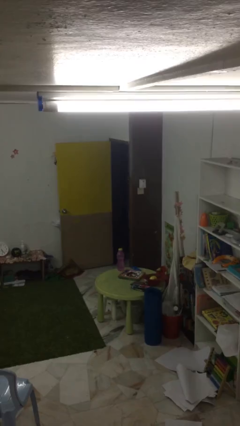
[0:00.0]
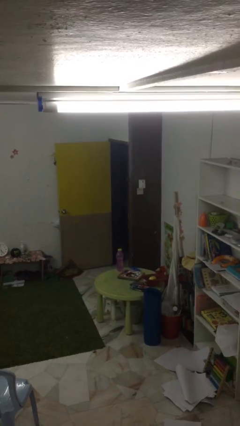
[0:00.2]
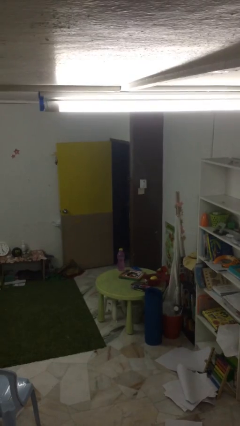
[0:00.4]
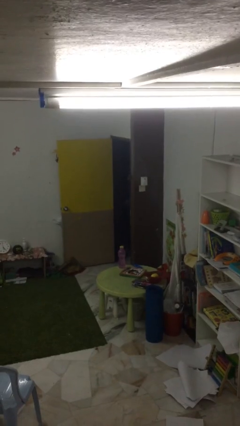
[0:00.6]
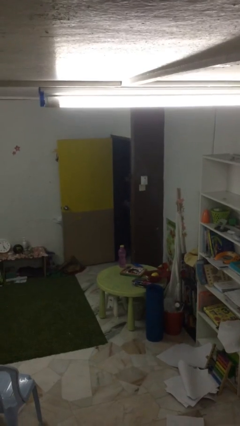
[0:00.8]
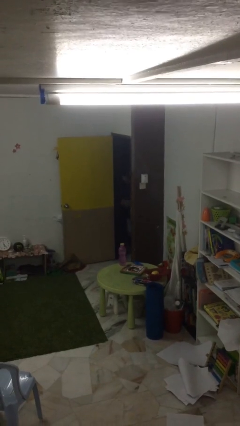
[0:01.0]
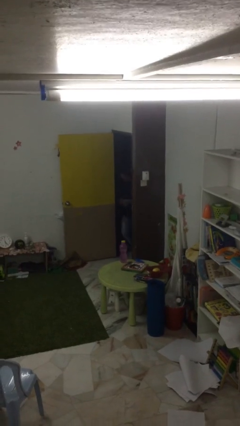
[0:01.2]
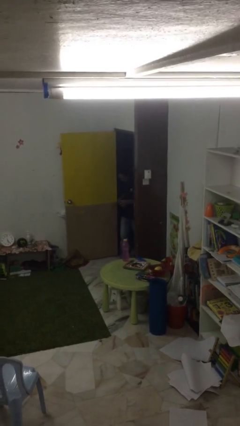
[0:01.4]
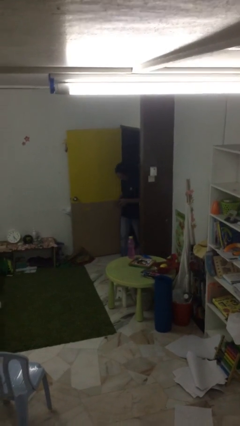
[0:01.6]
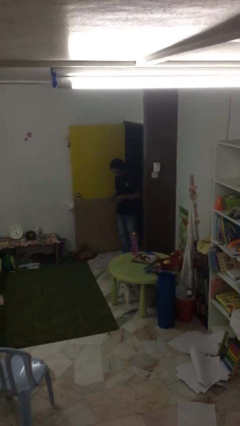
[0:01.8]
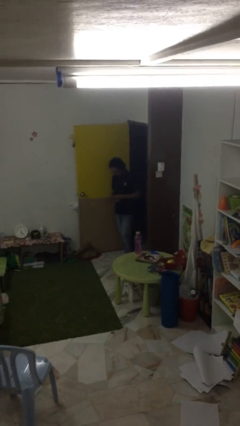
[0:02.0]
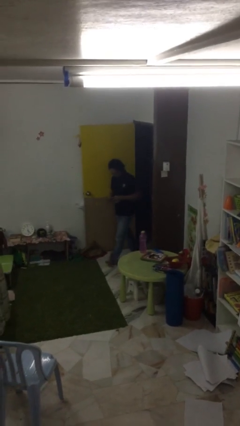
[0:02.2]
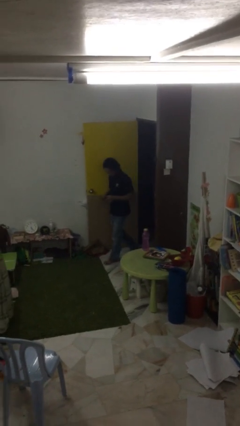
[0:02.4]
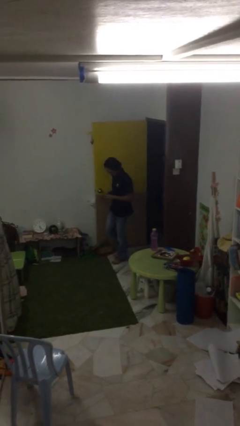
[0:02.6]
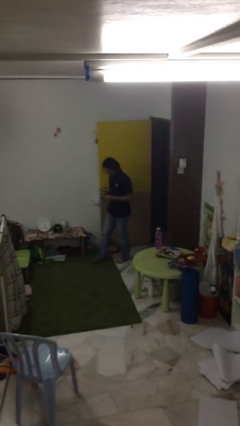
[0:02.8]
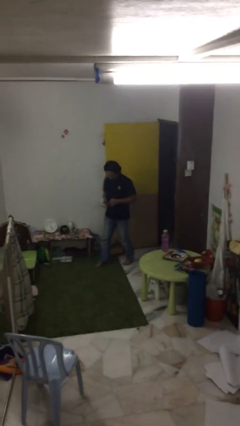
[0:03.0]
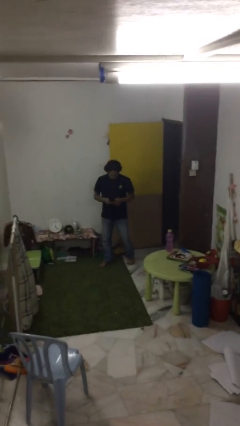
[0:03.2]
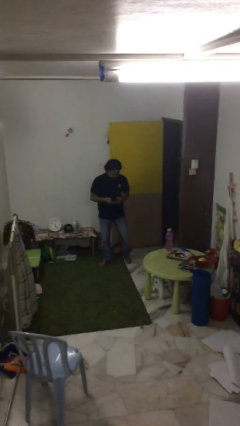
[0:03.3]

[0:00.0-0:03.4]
person enters scene through structure

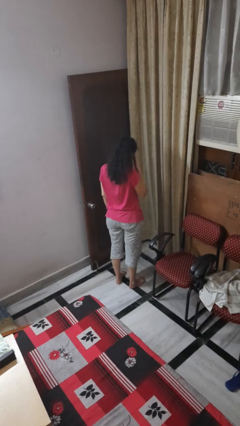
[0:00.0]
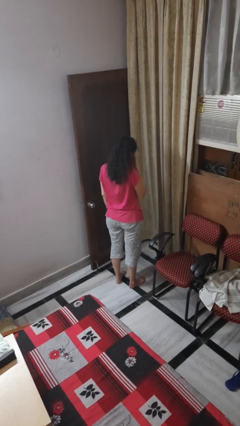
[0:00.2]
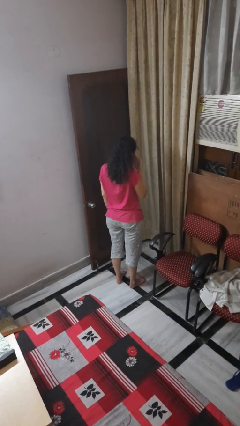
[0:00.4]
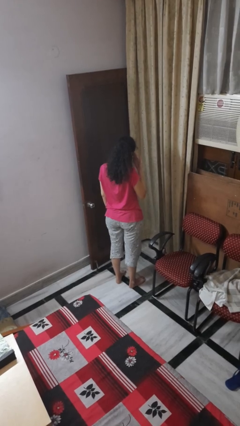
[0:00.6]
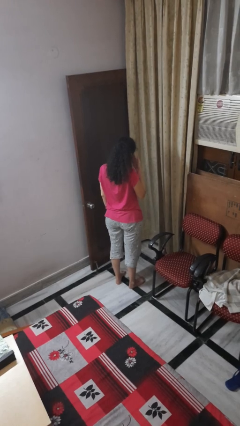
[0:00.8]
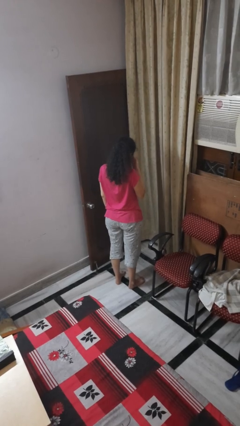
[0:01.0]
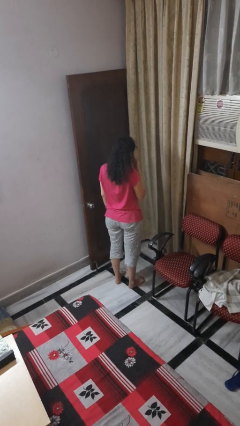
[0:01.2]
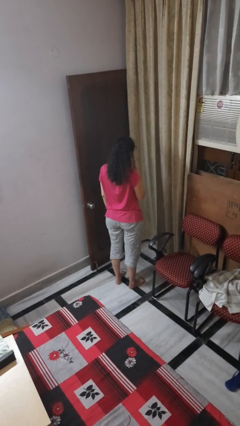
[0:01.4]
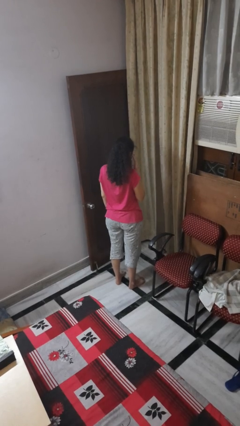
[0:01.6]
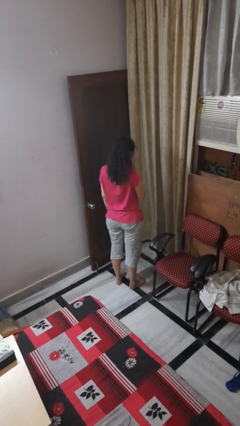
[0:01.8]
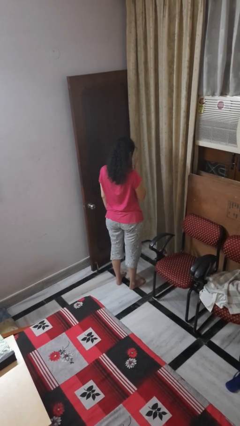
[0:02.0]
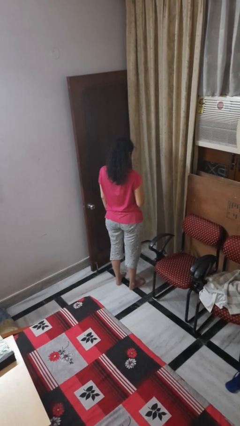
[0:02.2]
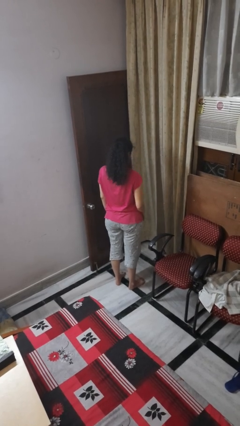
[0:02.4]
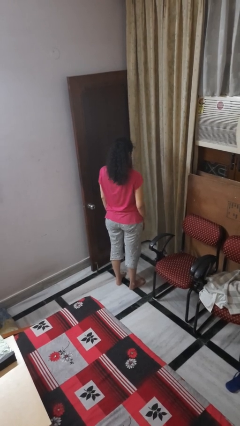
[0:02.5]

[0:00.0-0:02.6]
person rubs eyes

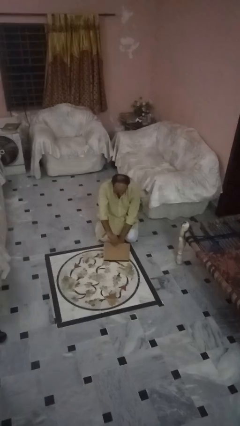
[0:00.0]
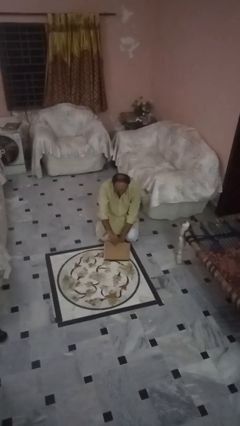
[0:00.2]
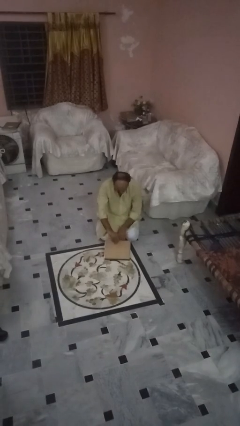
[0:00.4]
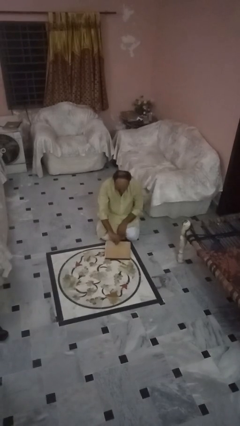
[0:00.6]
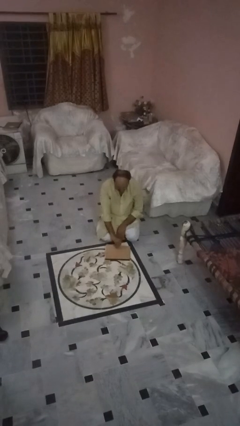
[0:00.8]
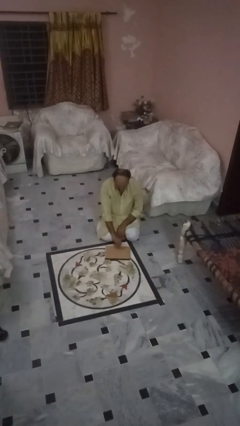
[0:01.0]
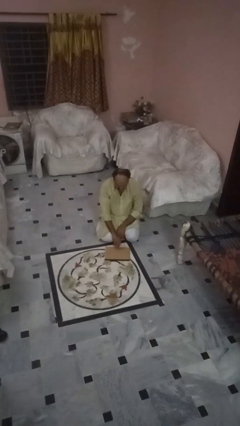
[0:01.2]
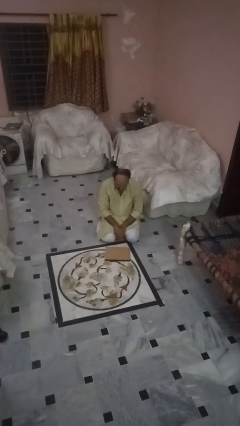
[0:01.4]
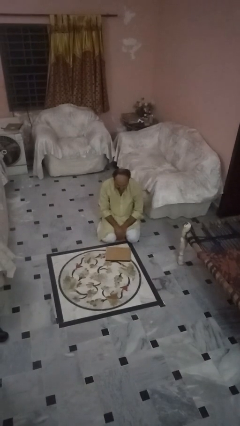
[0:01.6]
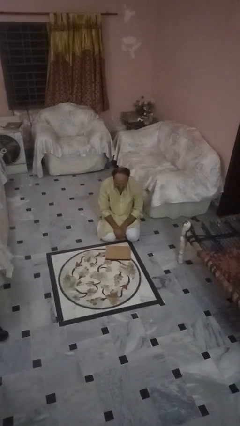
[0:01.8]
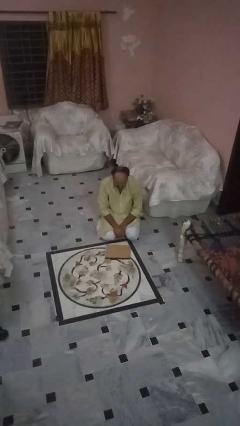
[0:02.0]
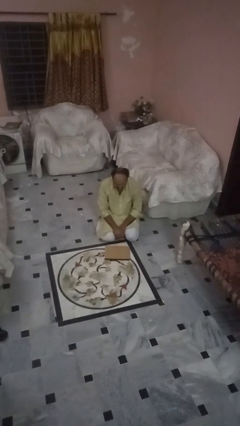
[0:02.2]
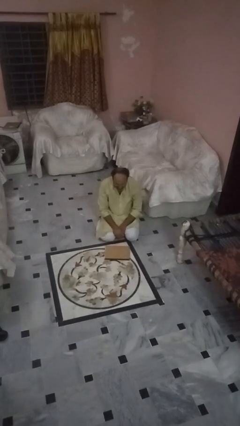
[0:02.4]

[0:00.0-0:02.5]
person closes laptop

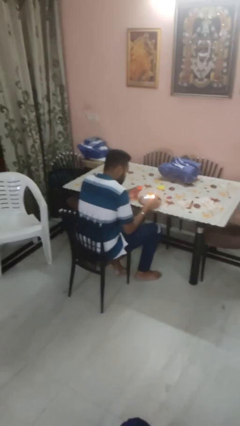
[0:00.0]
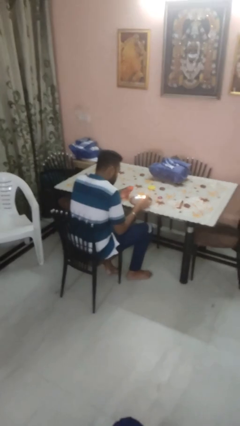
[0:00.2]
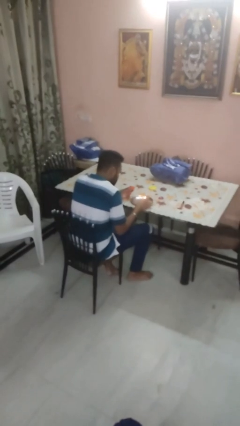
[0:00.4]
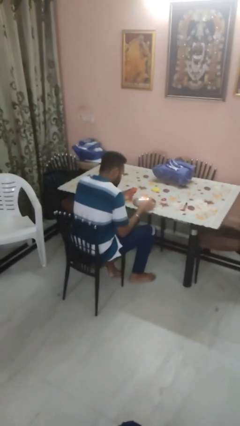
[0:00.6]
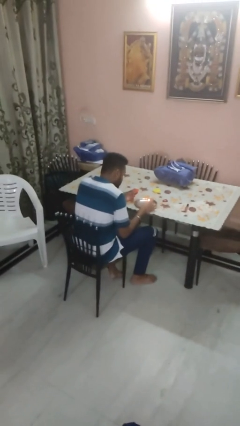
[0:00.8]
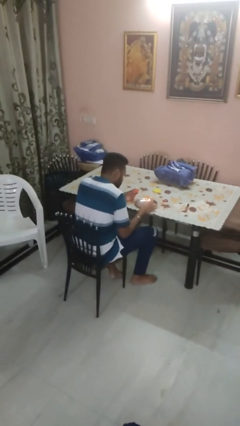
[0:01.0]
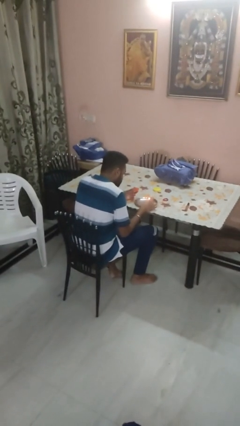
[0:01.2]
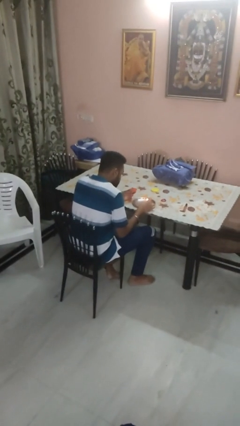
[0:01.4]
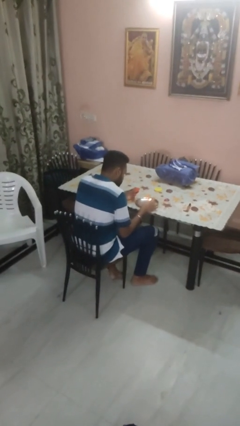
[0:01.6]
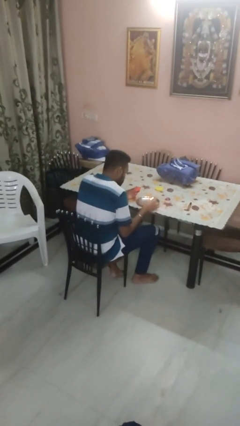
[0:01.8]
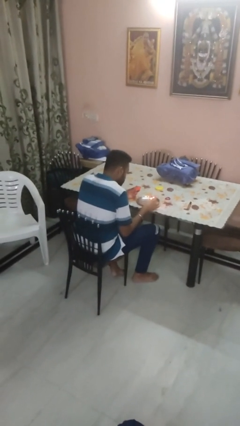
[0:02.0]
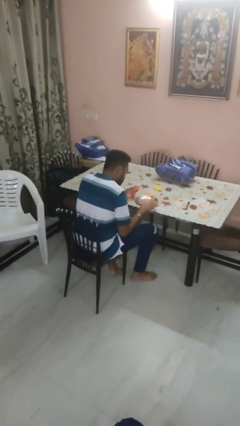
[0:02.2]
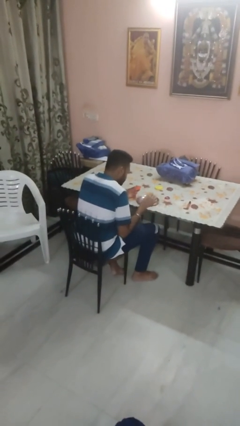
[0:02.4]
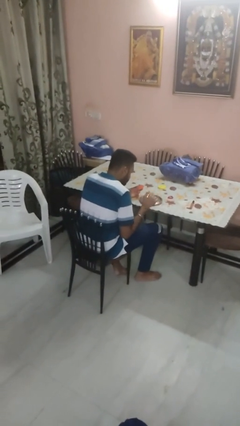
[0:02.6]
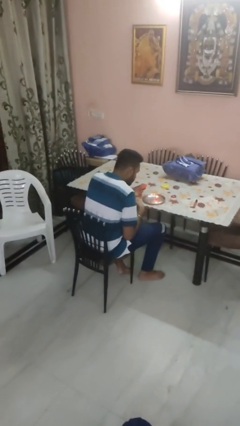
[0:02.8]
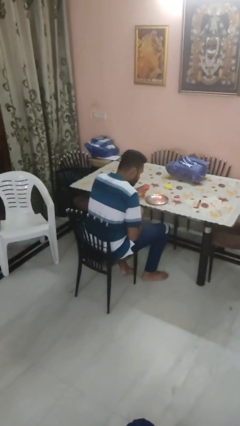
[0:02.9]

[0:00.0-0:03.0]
person lights candle

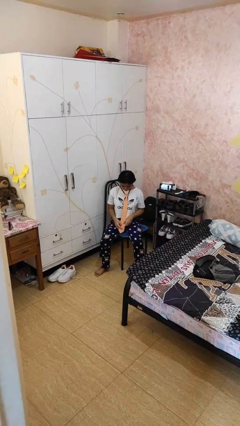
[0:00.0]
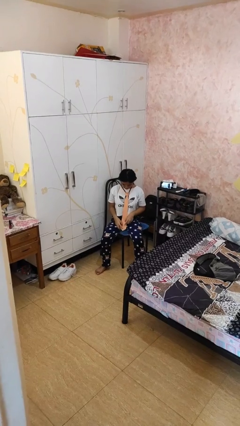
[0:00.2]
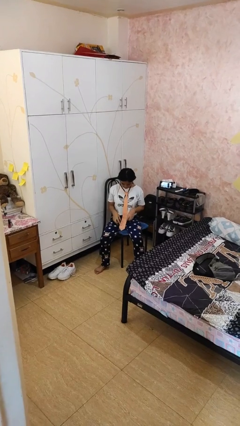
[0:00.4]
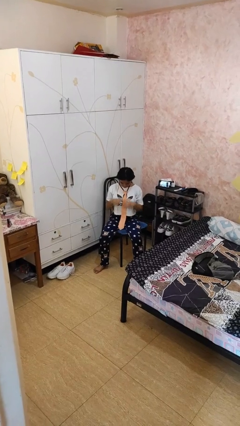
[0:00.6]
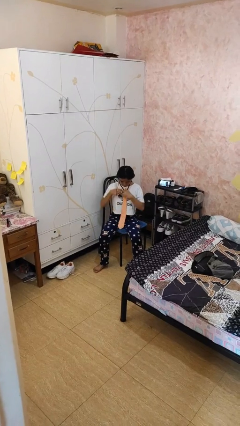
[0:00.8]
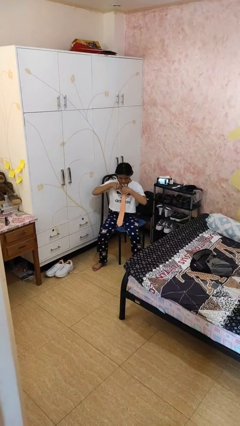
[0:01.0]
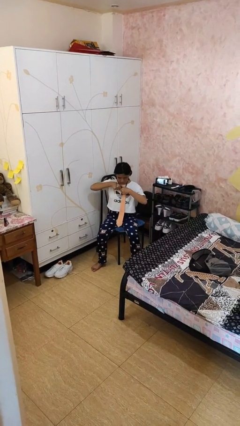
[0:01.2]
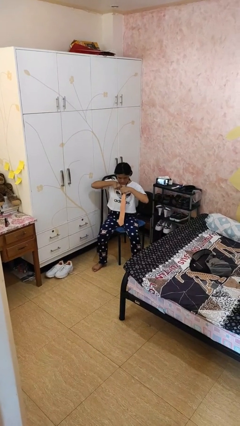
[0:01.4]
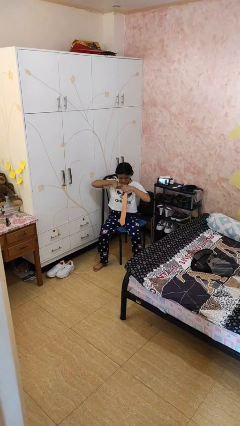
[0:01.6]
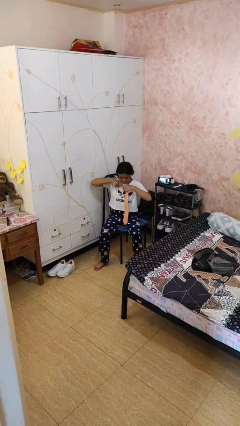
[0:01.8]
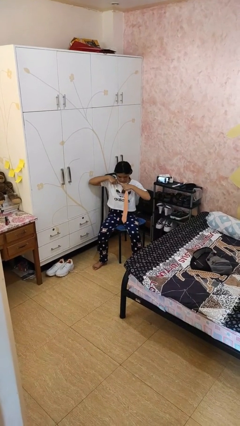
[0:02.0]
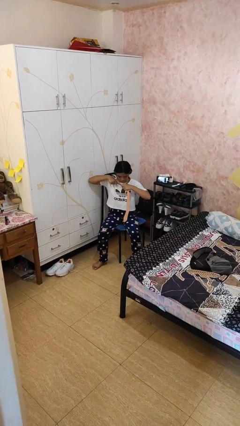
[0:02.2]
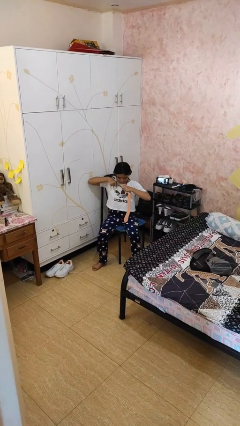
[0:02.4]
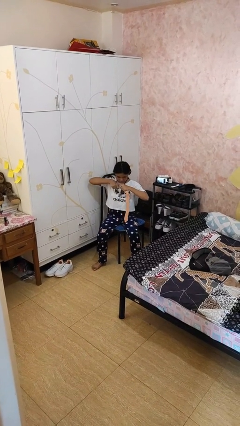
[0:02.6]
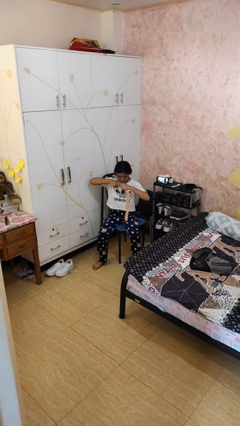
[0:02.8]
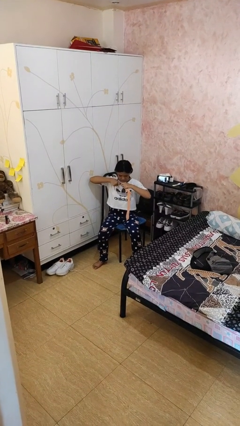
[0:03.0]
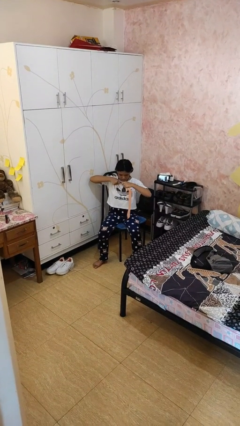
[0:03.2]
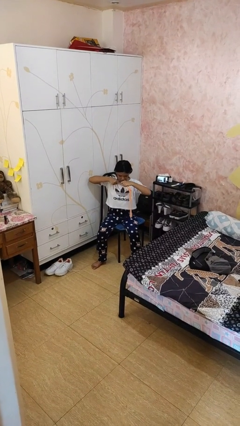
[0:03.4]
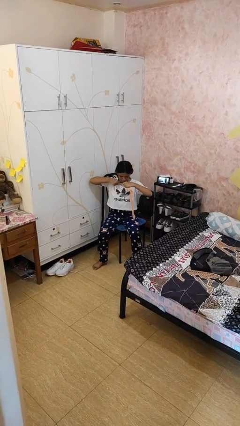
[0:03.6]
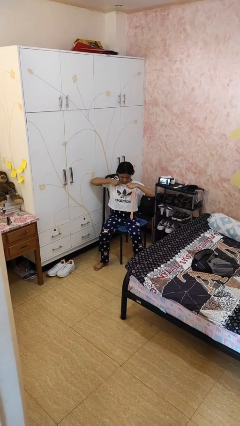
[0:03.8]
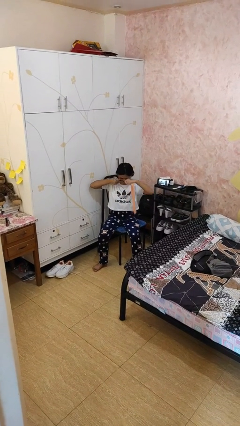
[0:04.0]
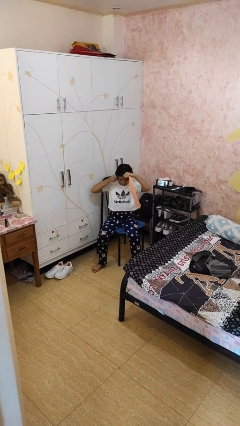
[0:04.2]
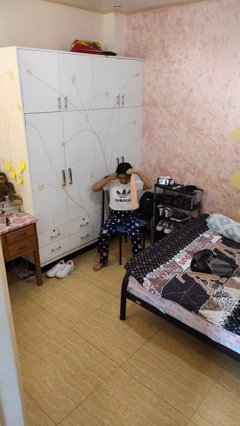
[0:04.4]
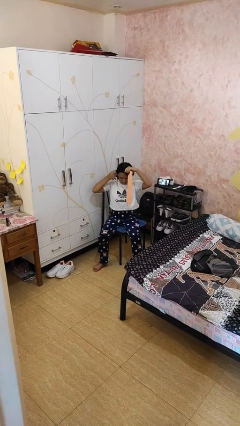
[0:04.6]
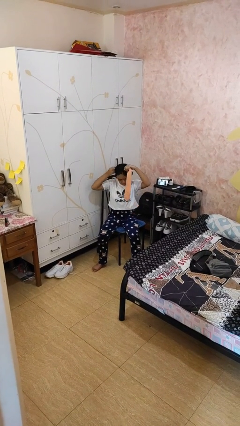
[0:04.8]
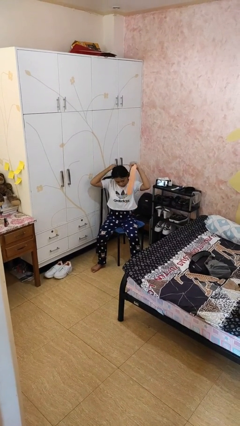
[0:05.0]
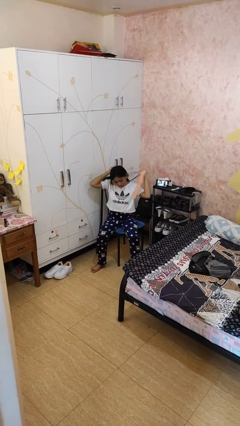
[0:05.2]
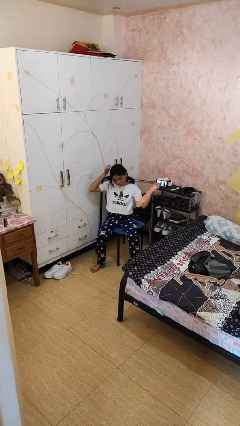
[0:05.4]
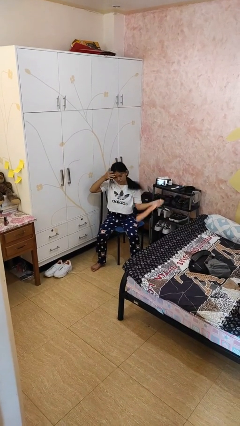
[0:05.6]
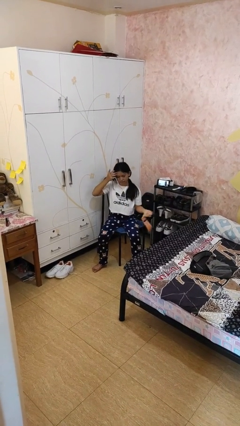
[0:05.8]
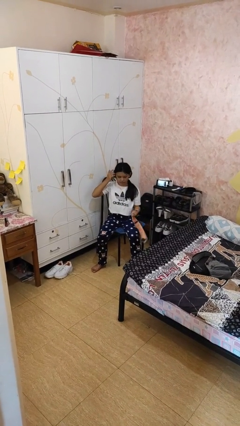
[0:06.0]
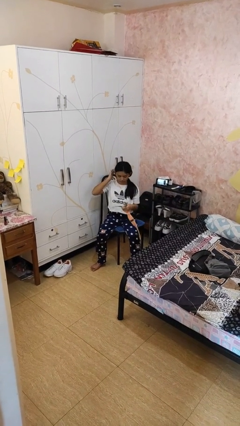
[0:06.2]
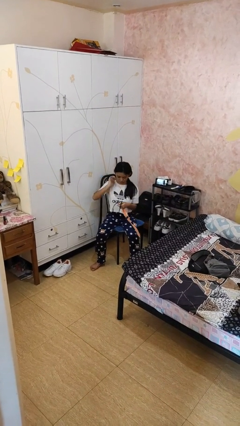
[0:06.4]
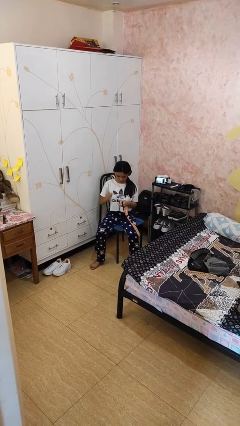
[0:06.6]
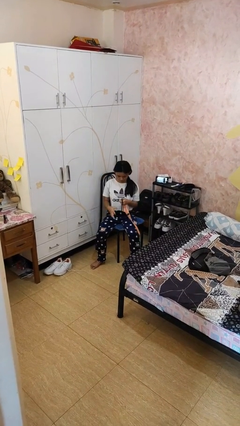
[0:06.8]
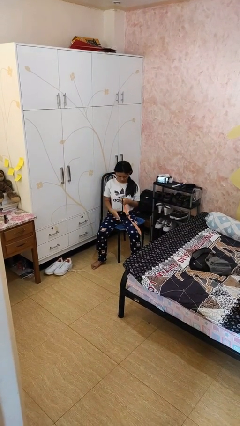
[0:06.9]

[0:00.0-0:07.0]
person takes off necktie
